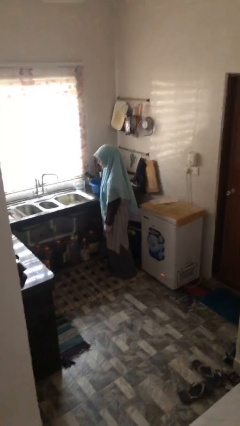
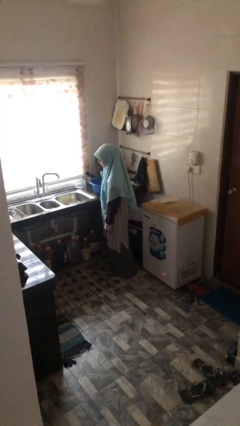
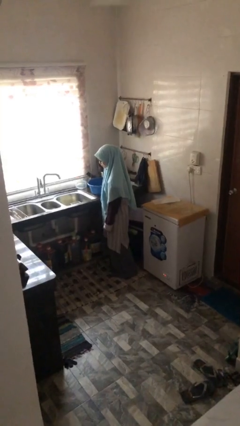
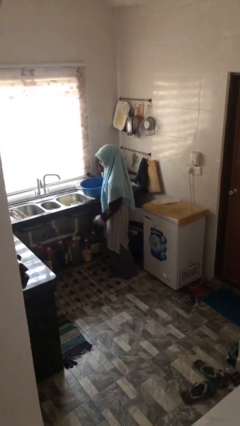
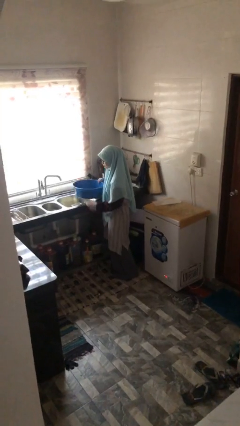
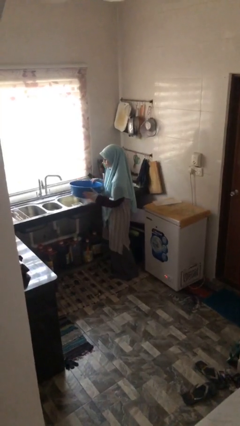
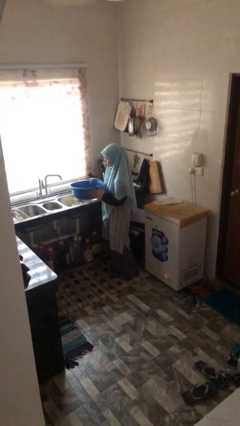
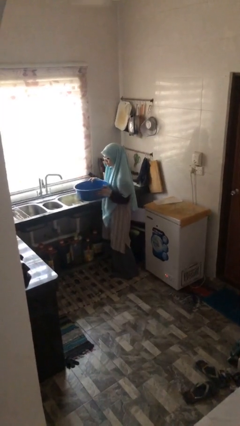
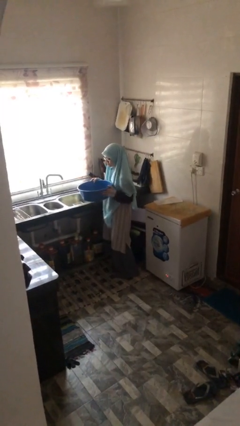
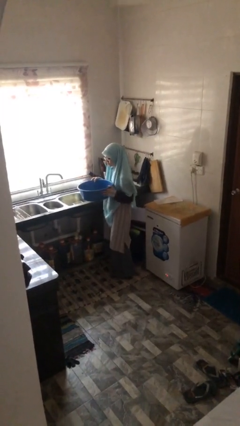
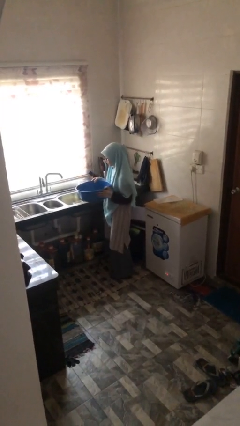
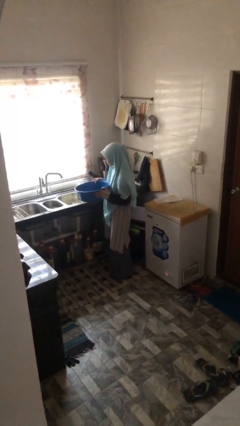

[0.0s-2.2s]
person picks up object from countertop

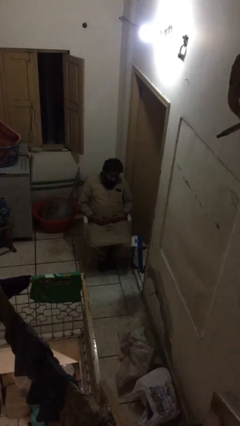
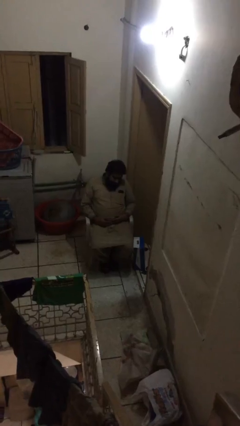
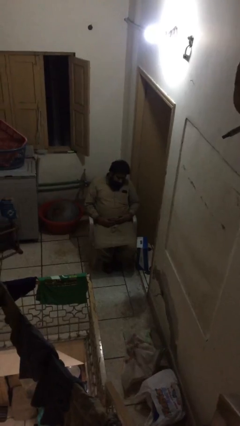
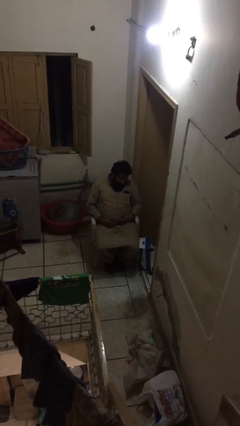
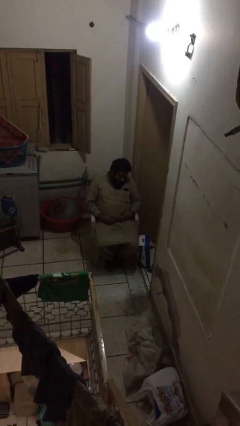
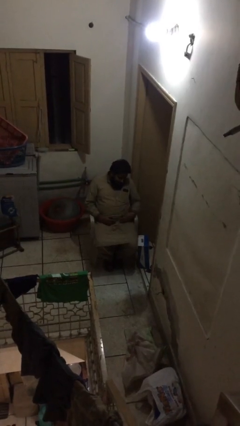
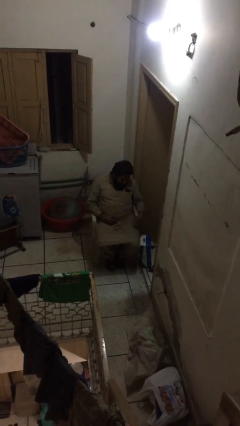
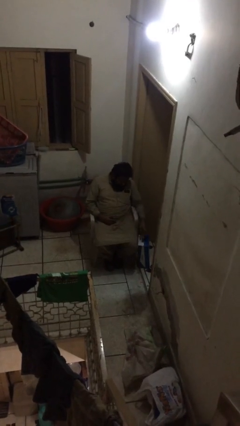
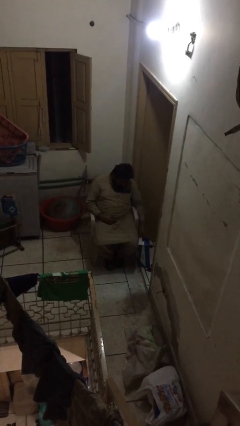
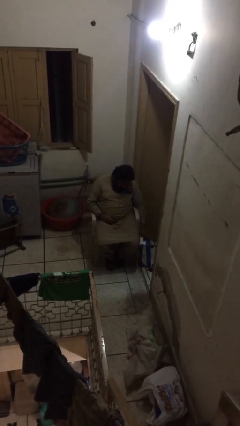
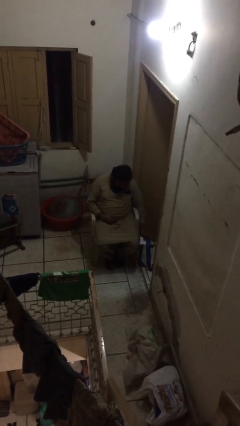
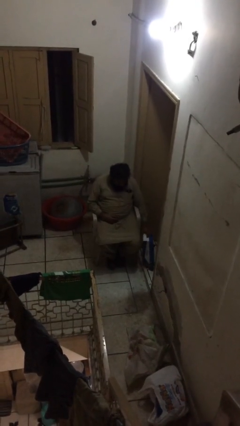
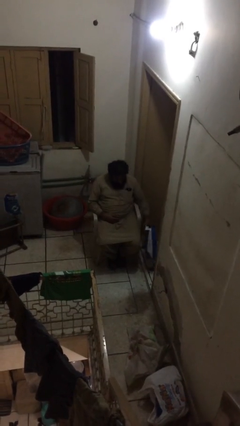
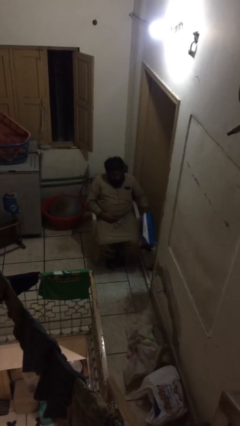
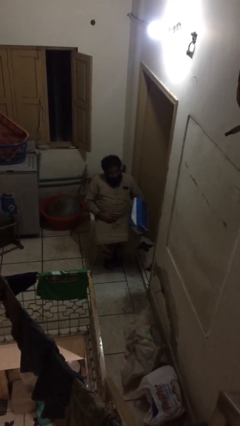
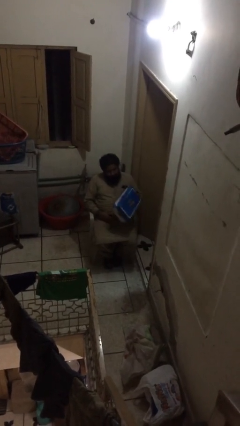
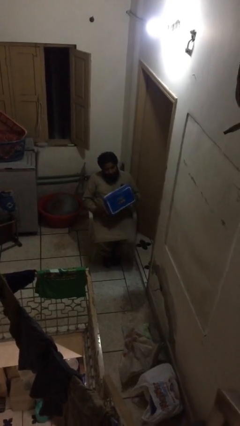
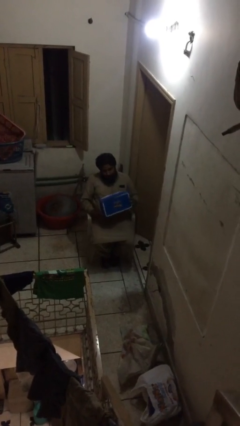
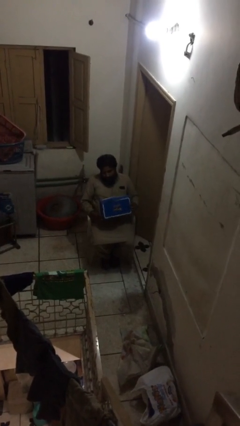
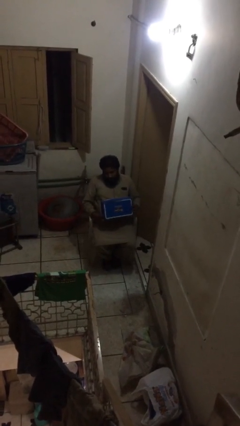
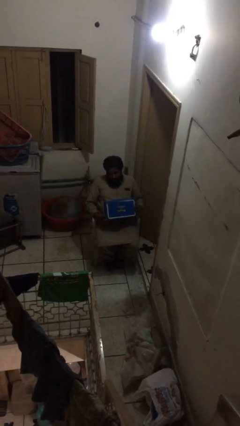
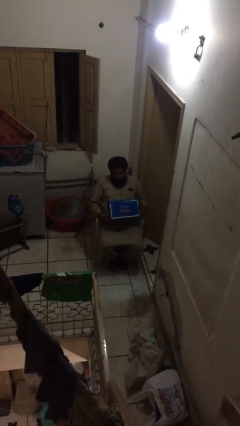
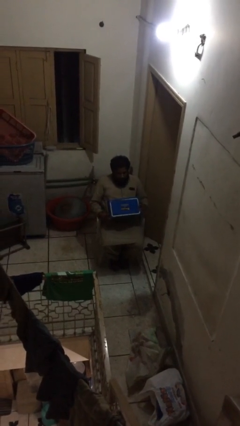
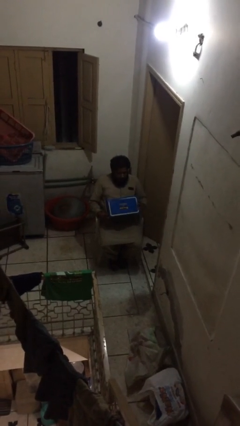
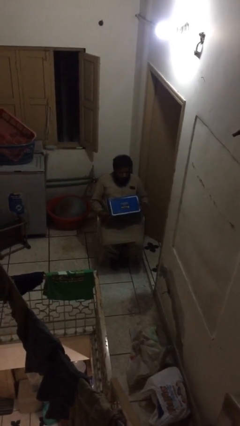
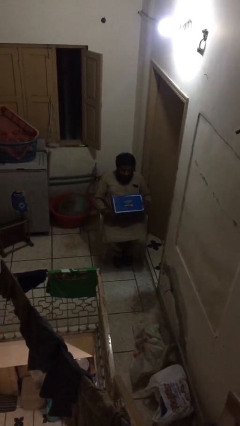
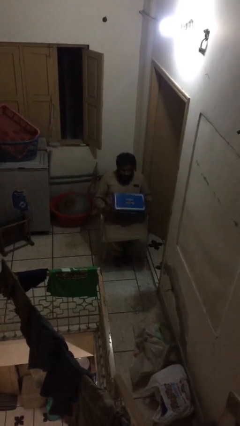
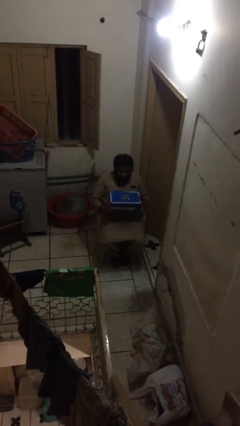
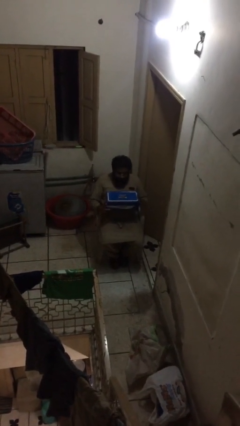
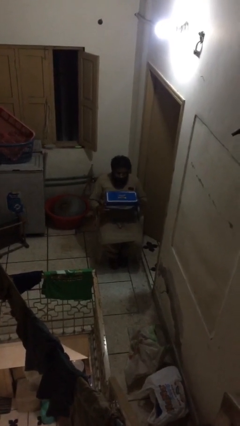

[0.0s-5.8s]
person picks up object from floor

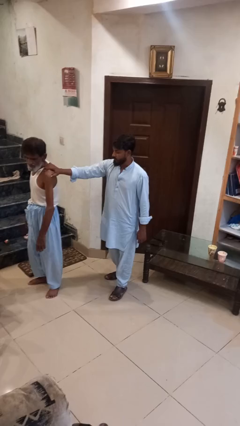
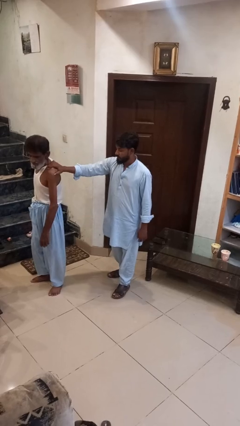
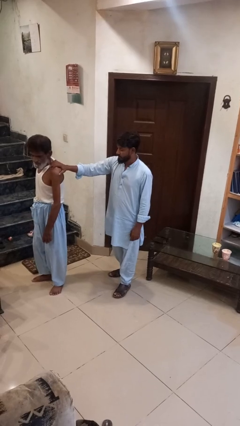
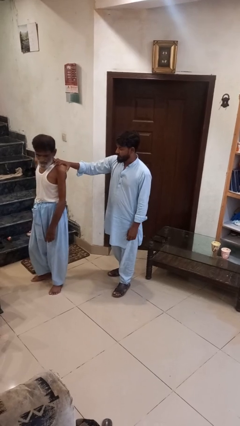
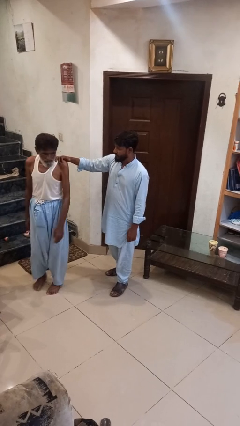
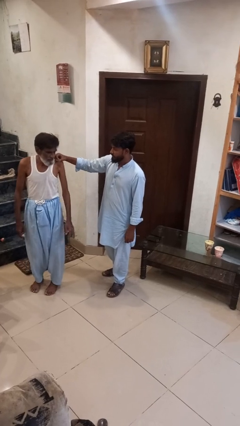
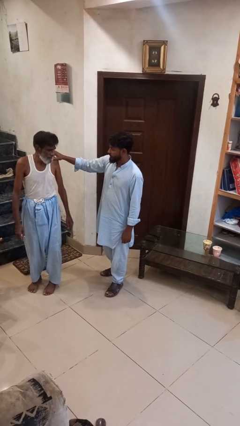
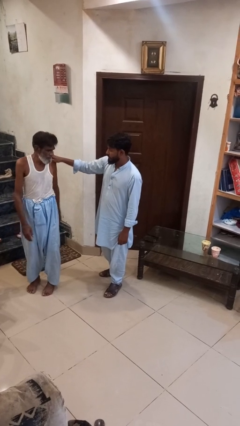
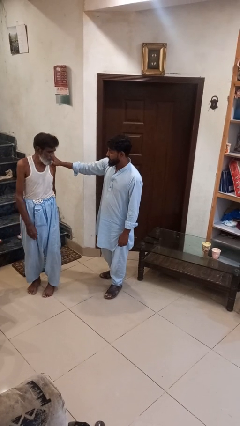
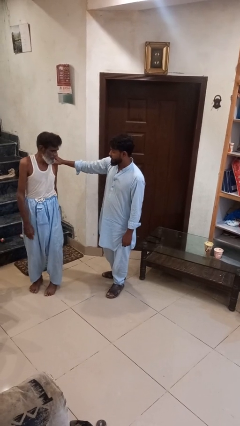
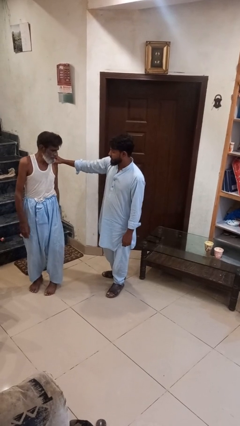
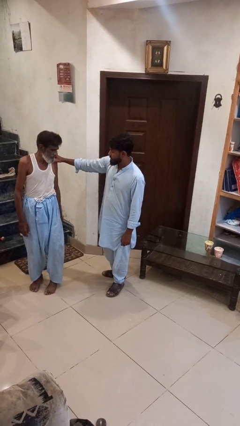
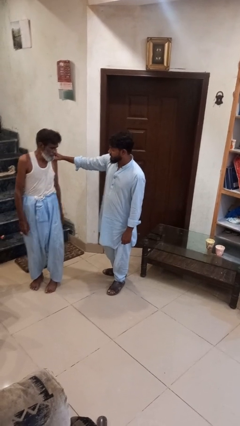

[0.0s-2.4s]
person spins person around

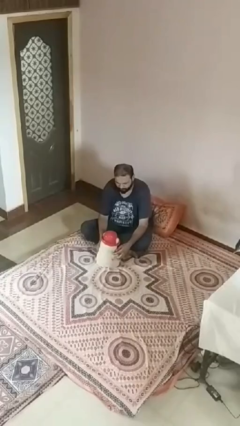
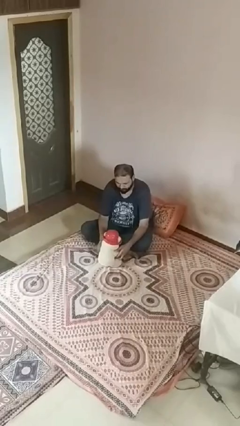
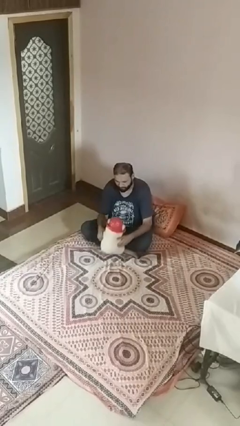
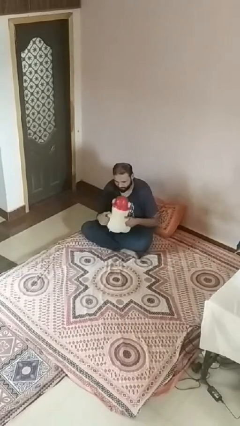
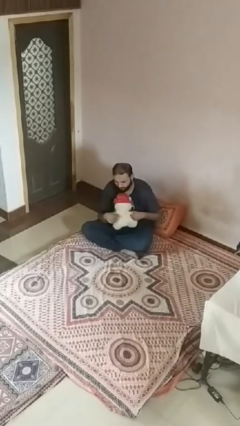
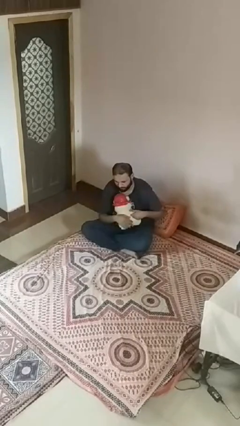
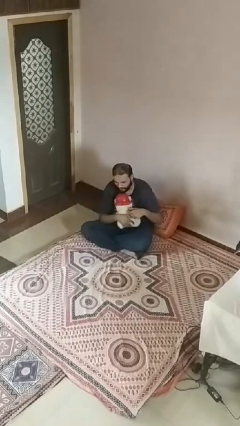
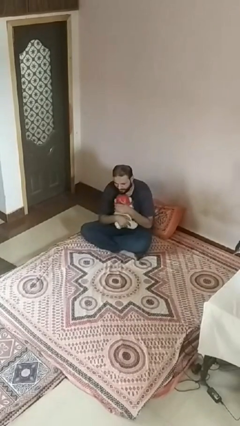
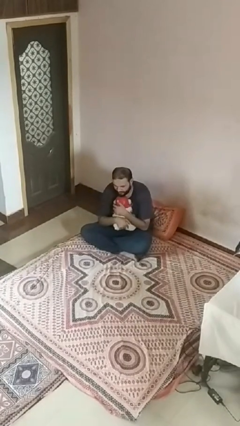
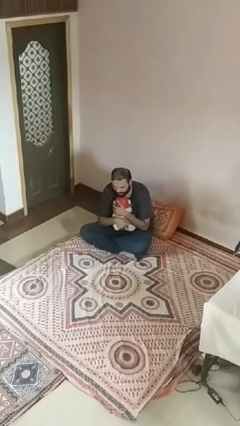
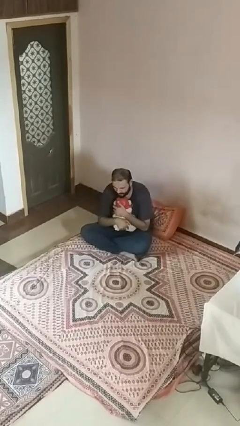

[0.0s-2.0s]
person hugs stuffed animal

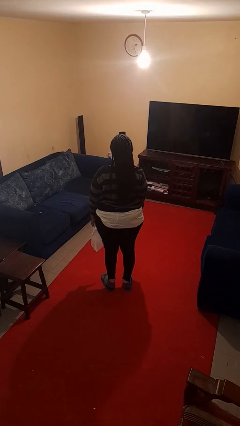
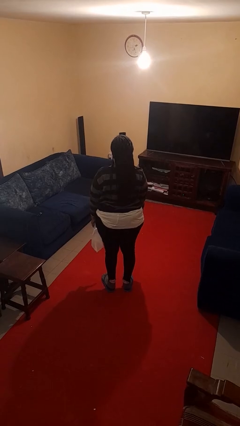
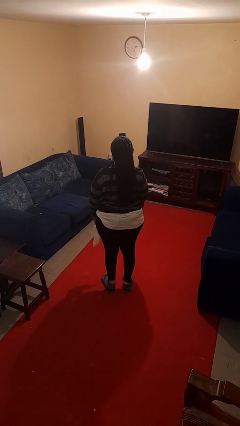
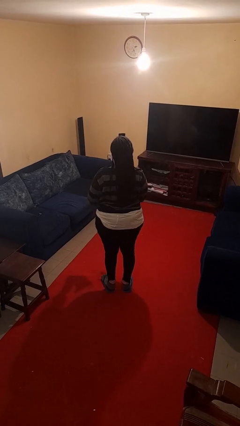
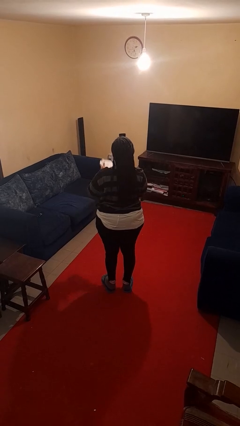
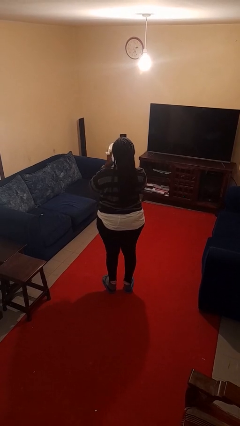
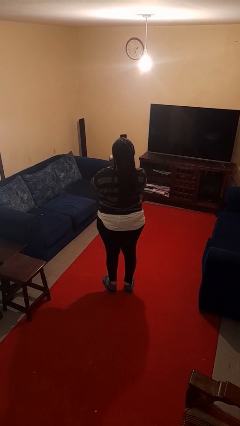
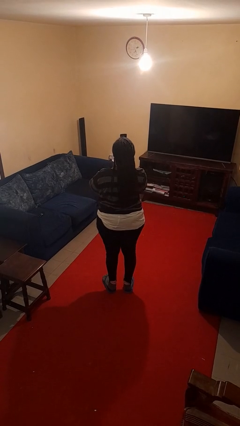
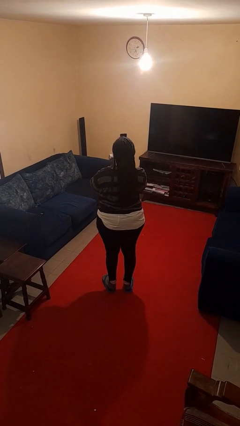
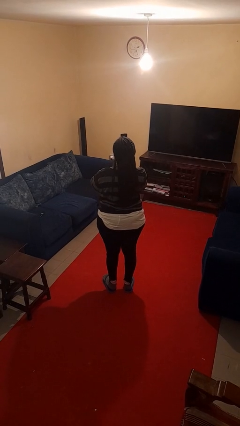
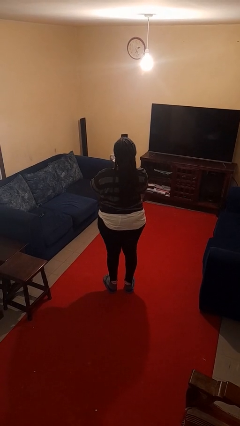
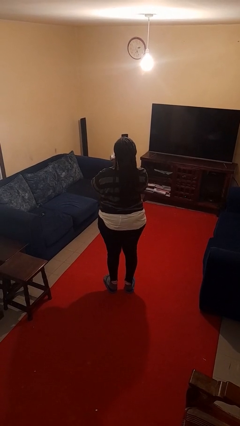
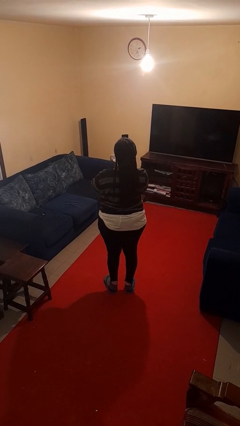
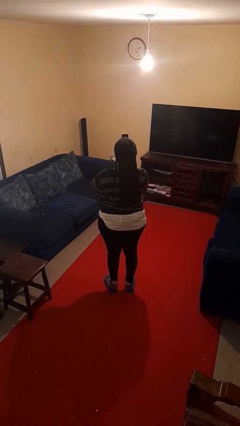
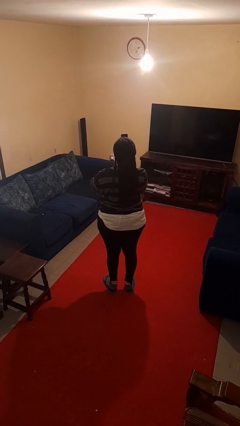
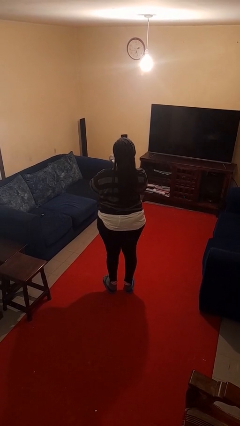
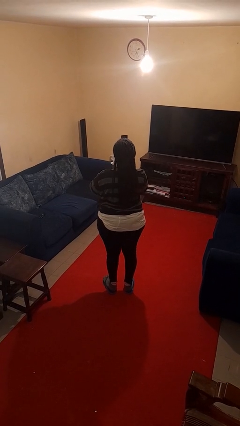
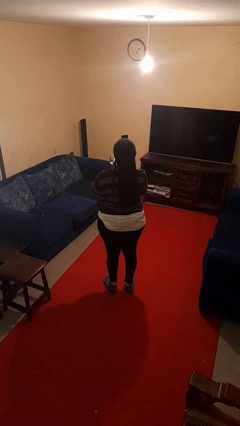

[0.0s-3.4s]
person wipes mouth with napkin

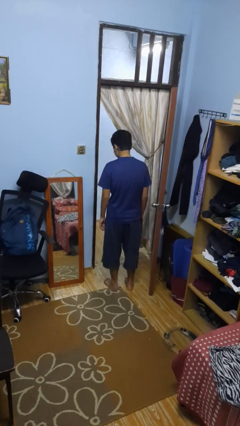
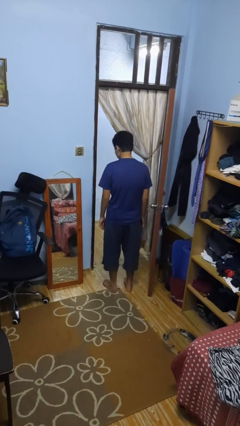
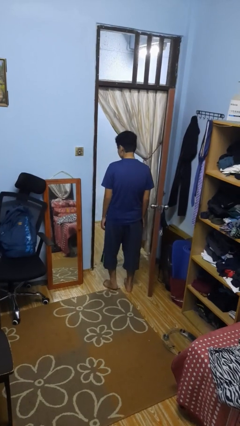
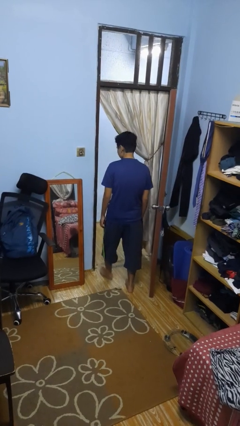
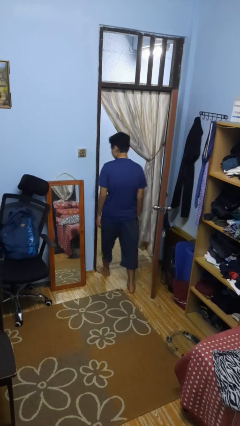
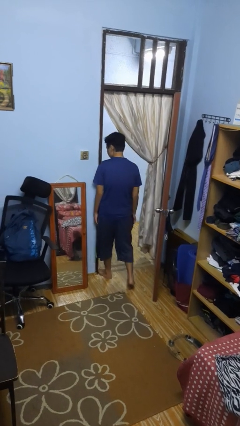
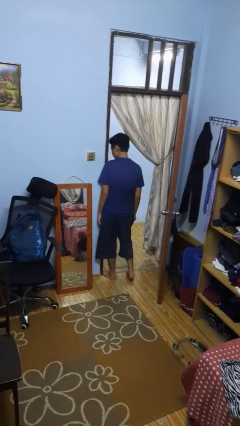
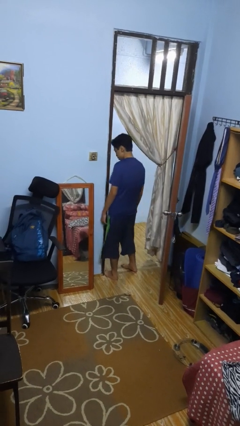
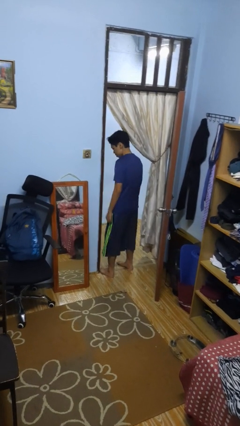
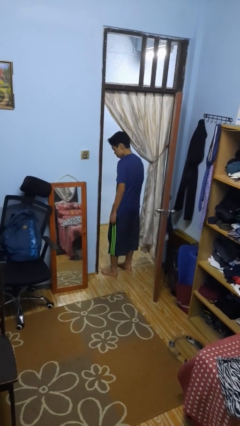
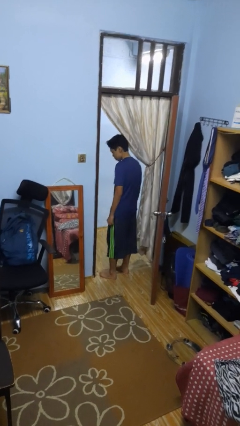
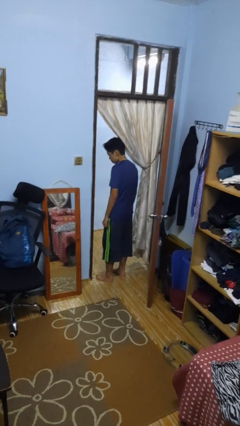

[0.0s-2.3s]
person bumps into wall
